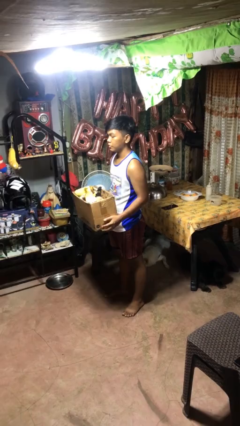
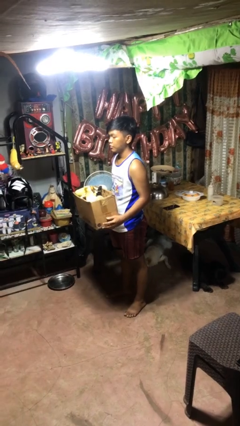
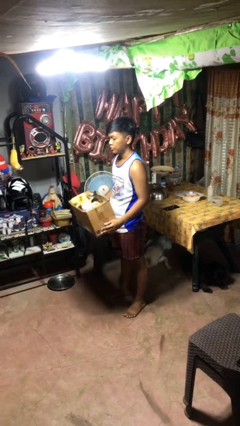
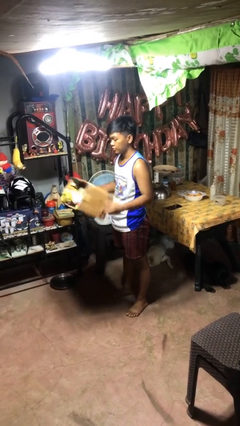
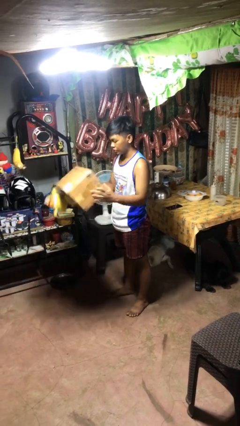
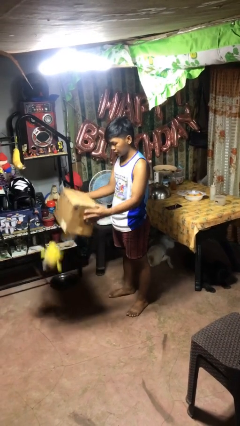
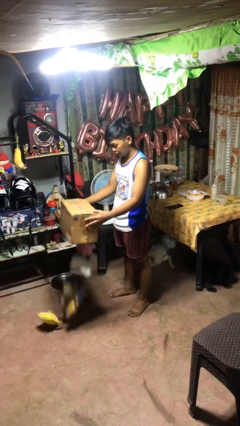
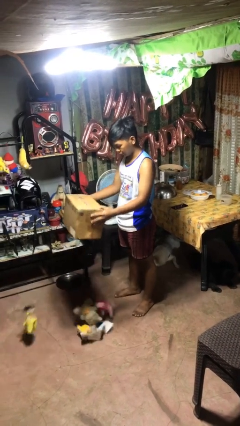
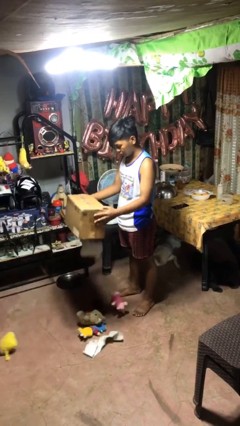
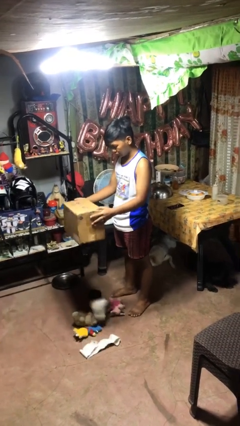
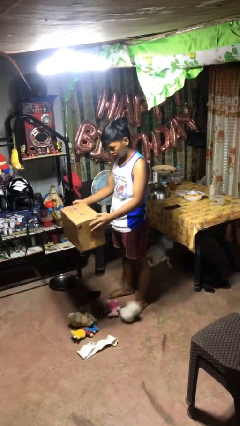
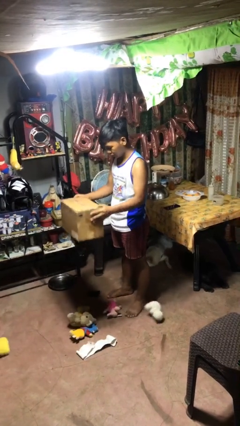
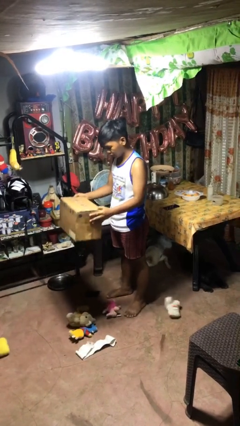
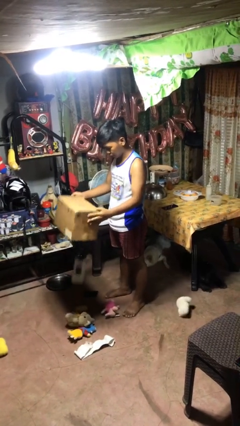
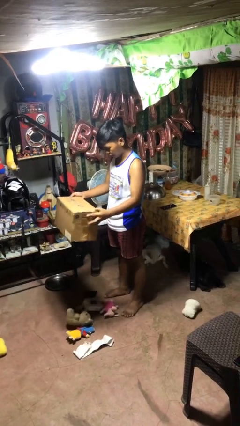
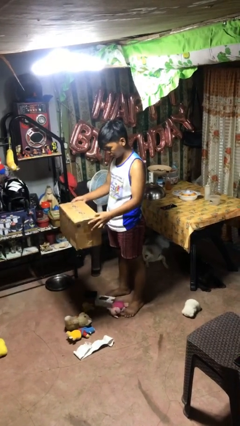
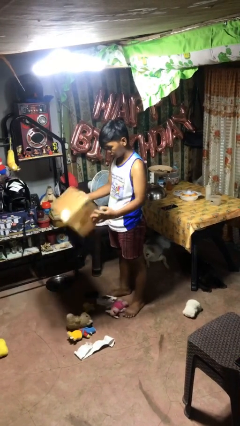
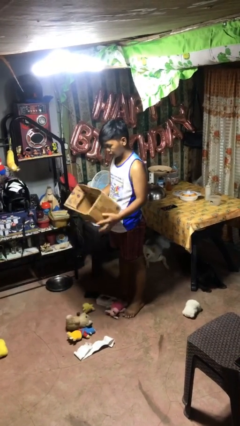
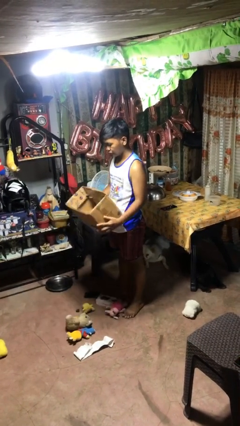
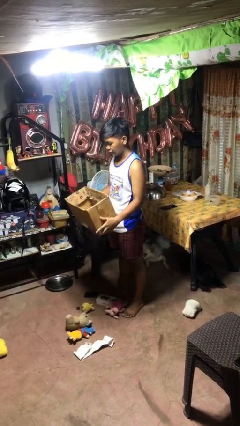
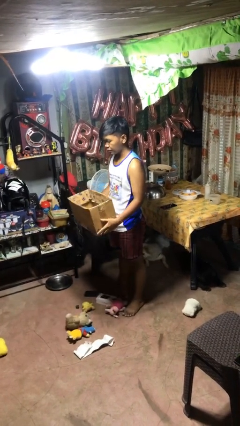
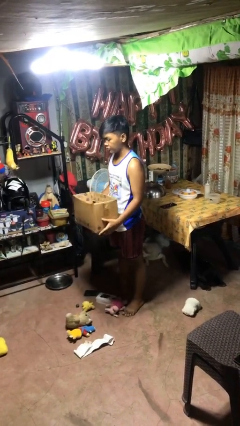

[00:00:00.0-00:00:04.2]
person unloads box onto floor

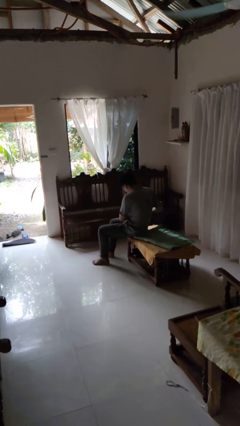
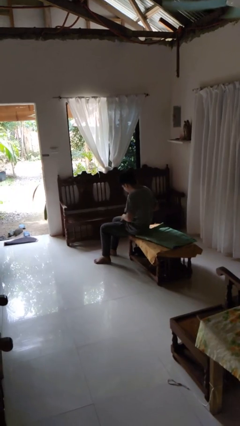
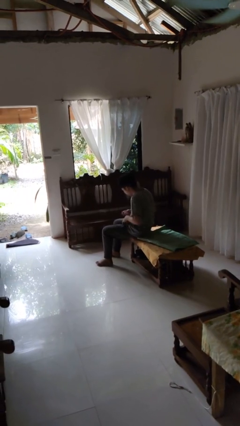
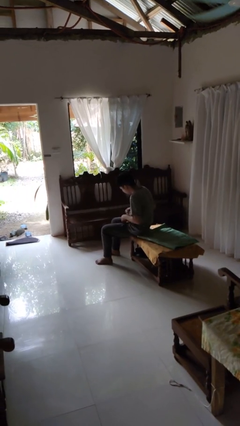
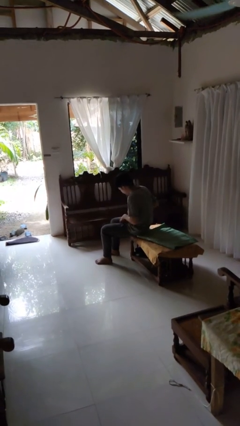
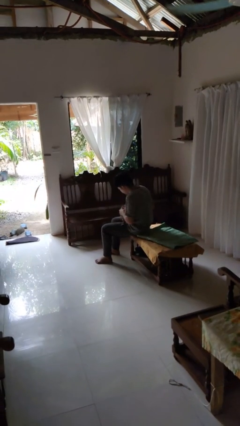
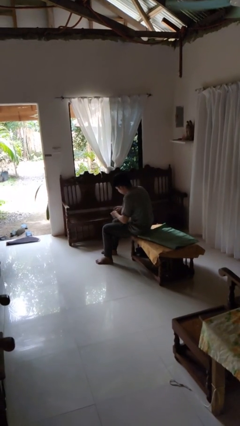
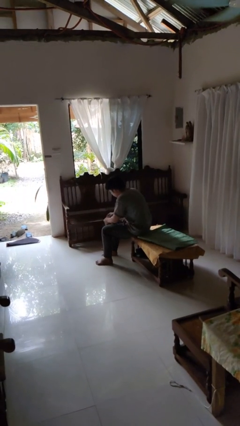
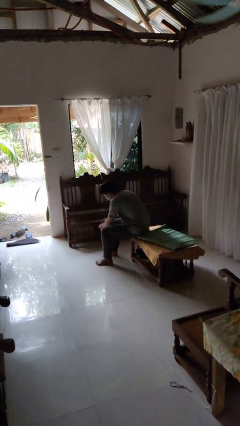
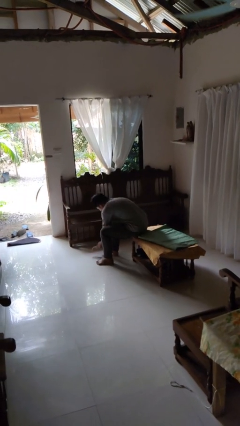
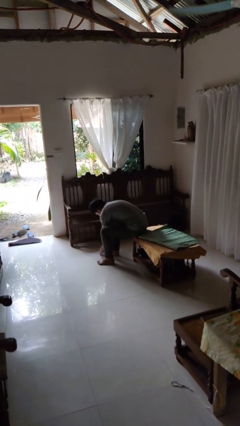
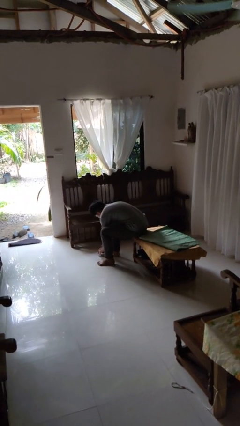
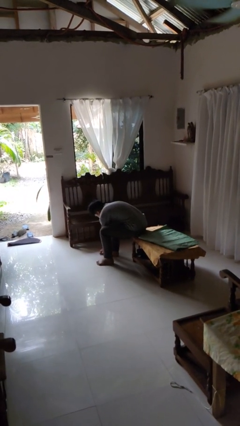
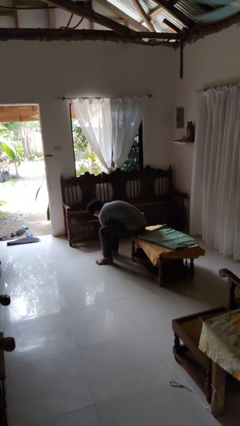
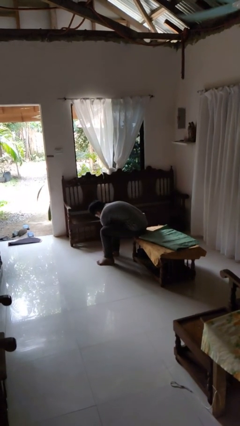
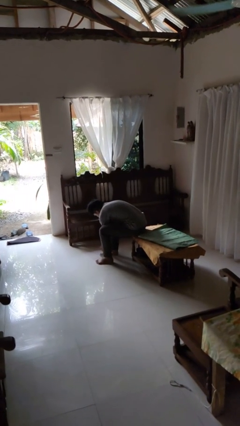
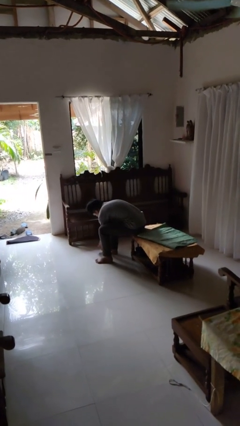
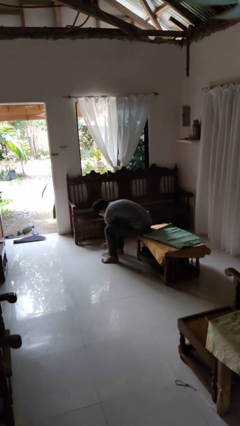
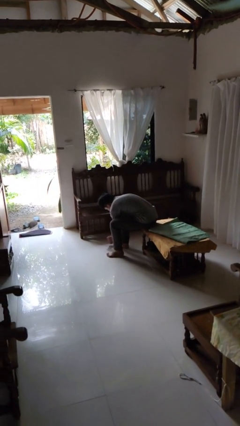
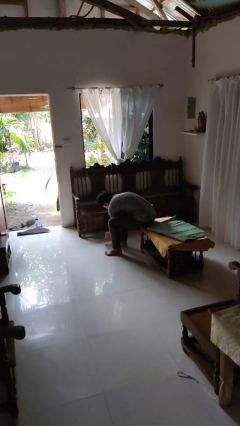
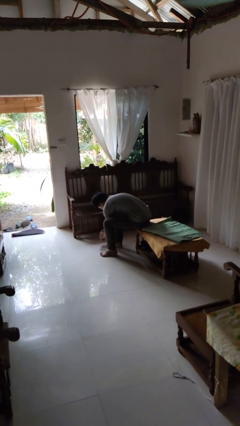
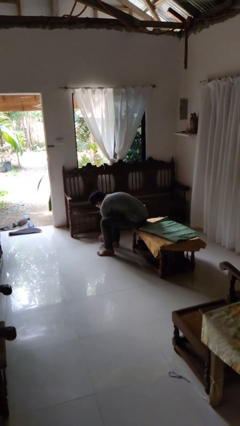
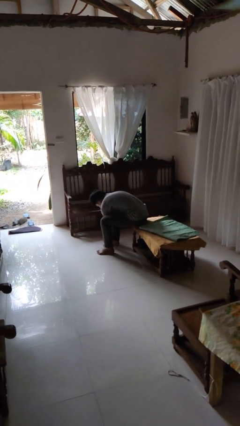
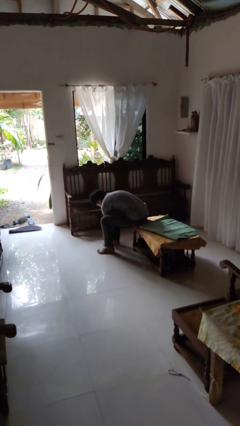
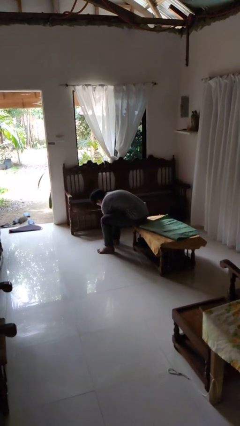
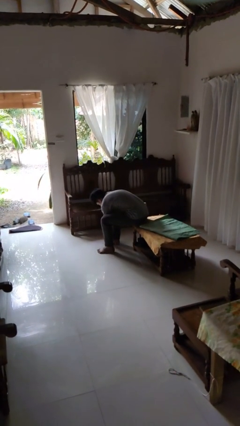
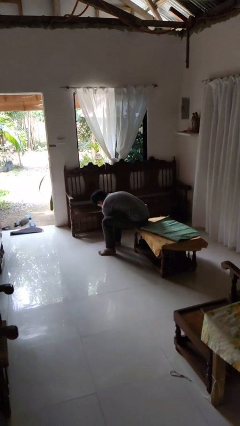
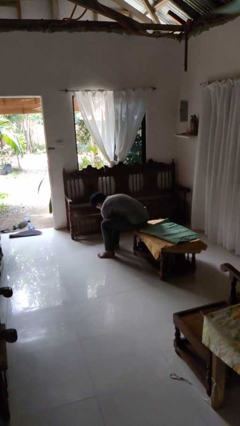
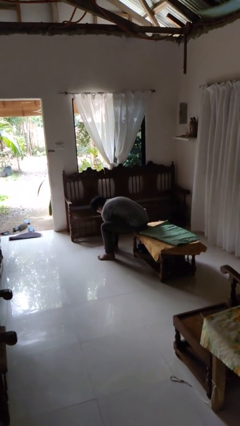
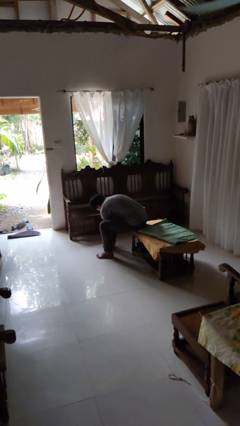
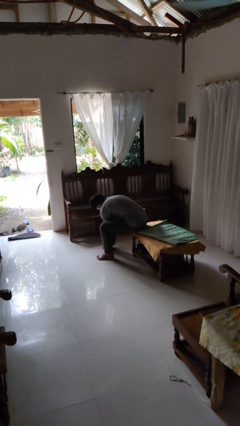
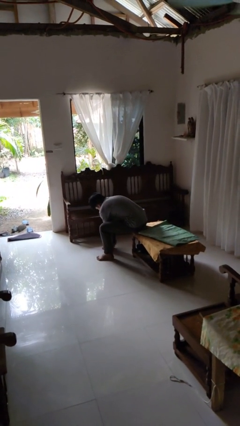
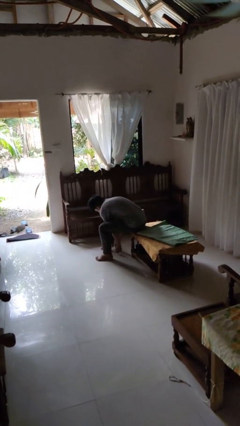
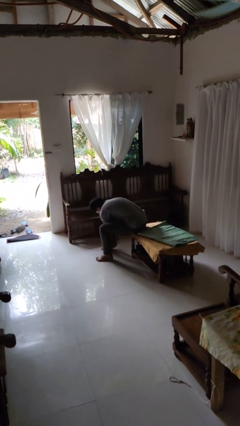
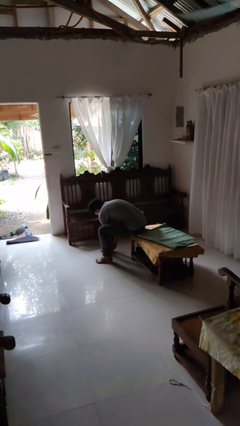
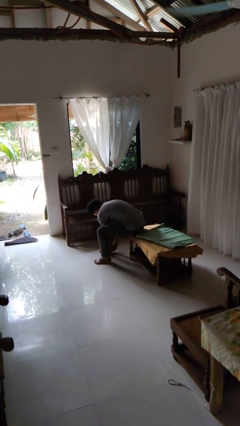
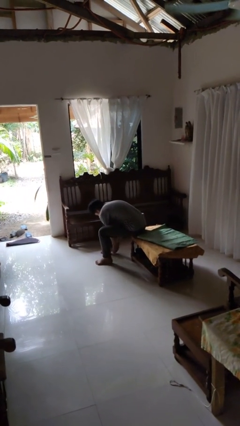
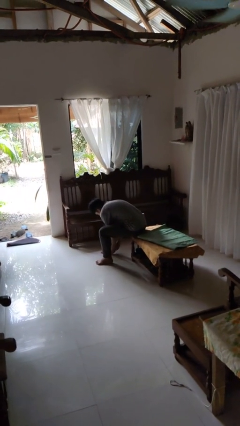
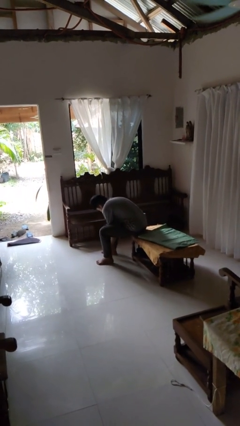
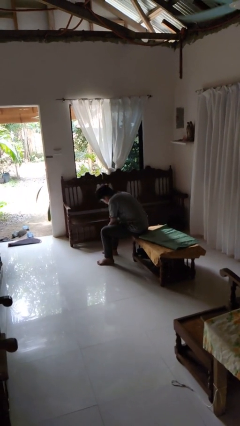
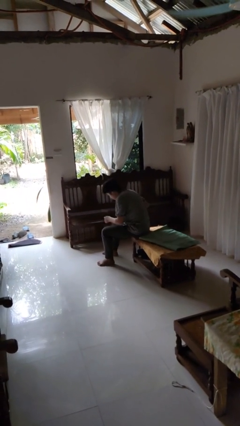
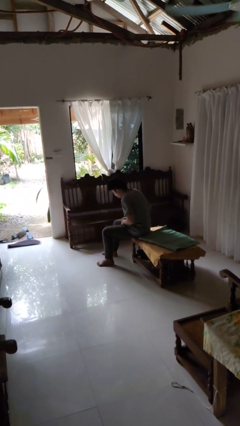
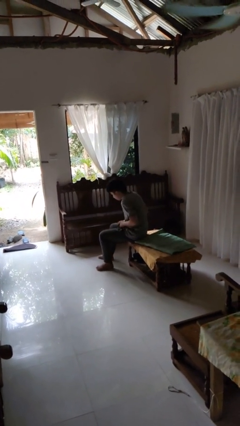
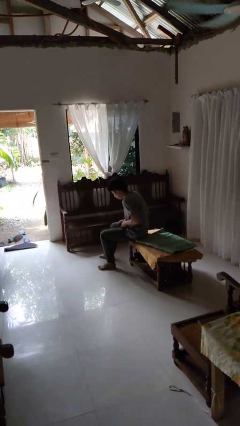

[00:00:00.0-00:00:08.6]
person puts on socks

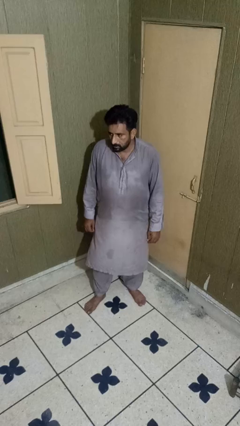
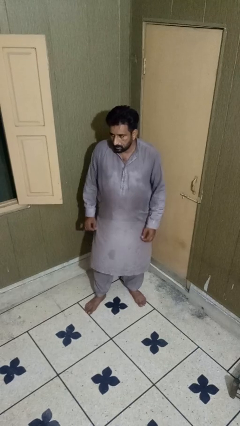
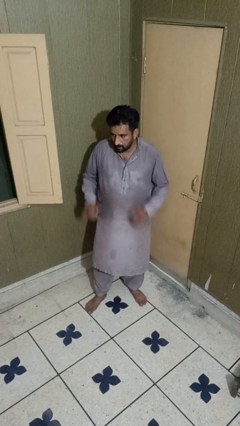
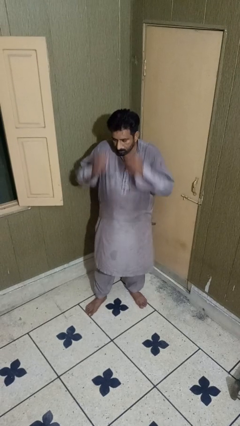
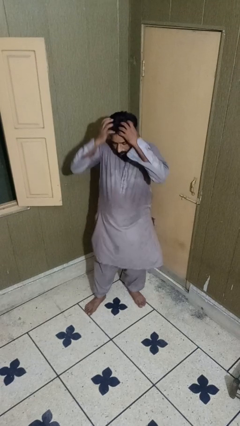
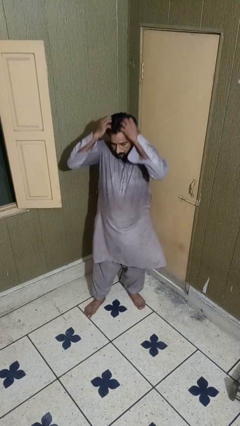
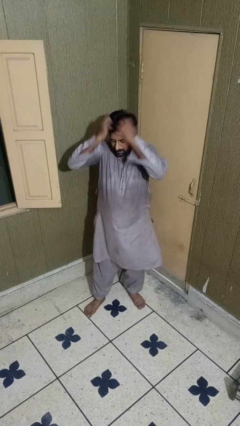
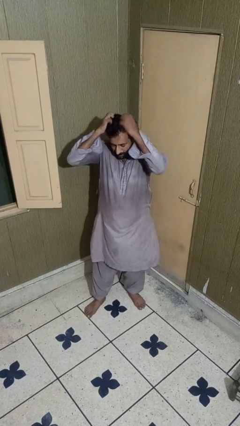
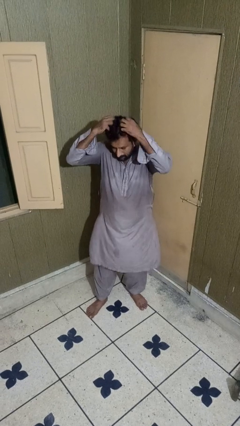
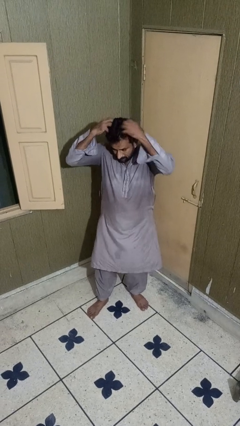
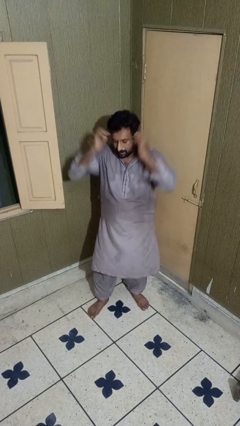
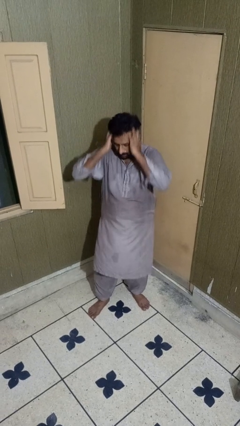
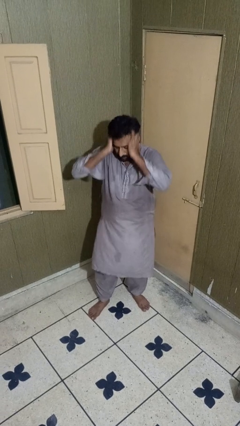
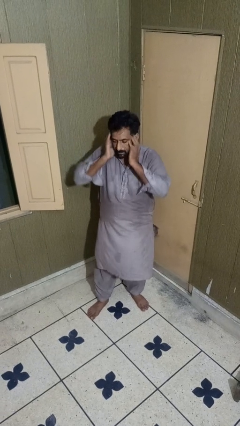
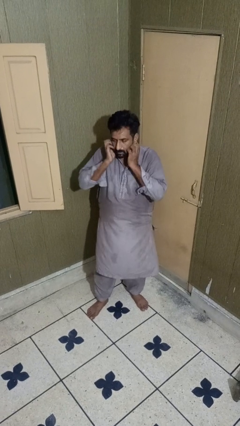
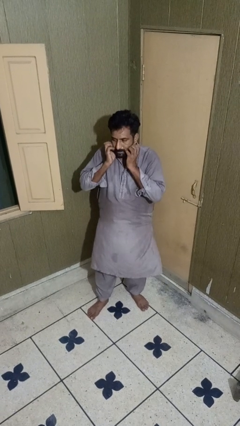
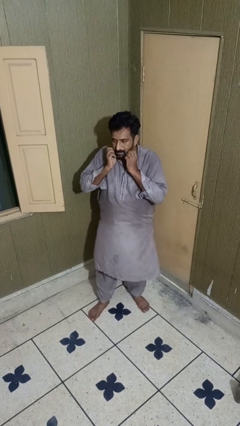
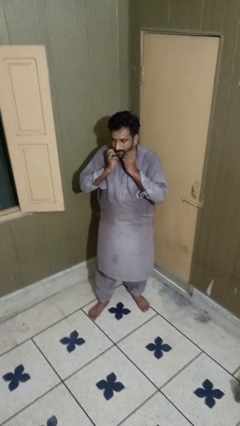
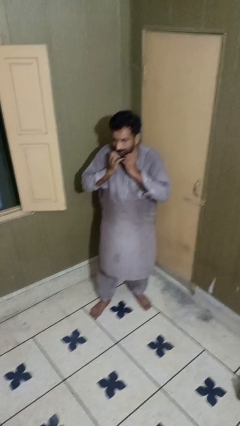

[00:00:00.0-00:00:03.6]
person scratches face

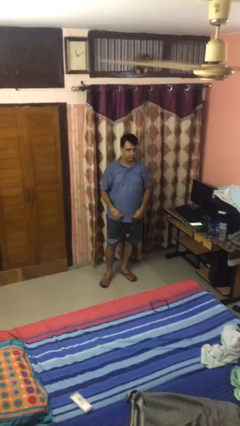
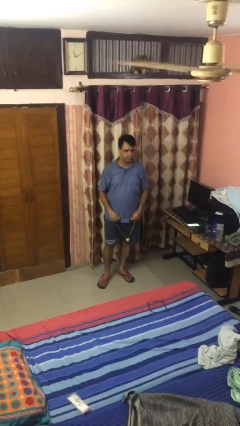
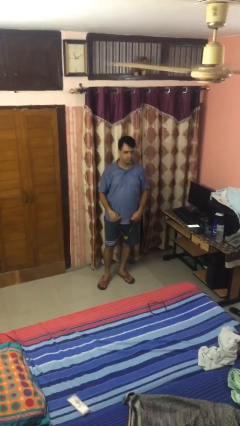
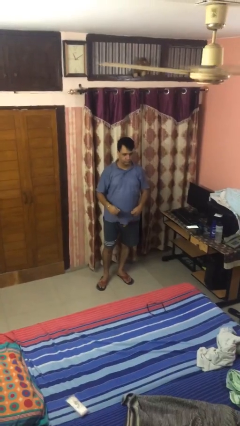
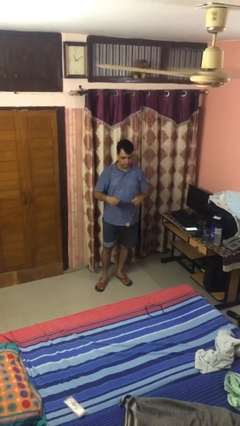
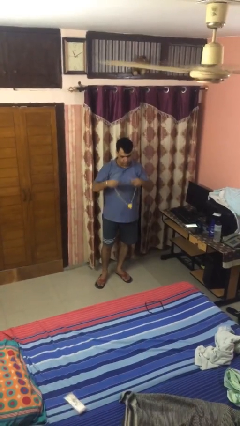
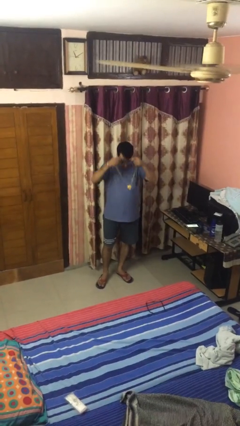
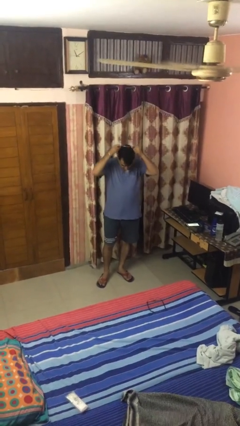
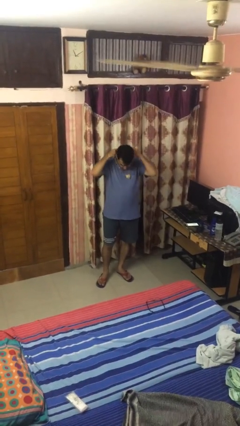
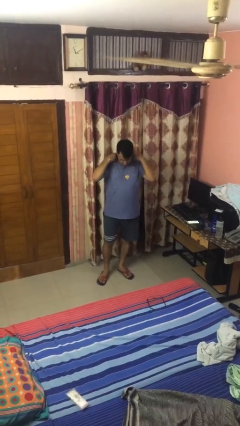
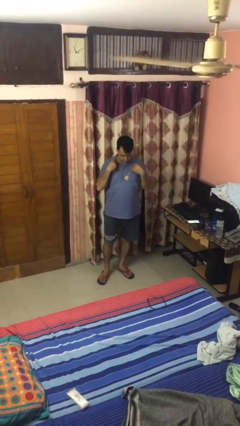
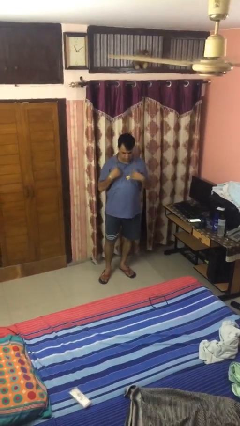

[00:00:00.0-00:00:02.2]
person puts on necklace
